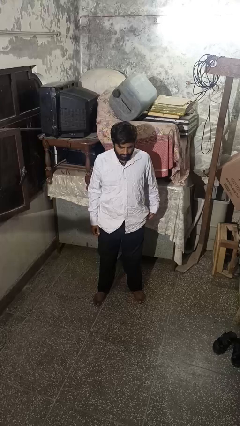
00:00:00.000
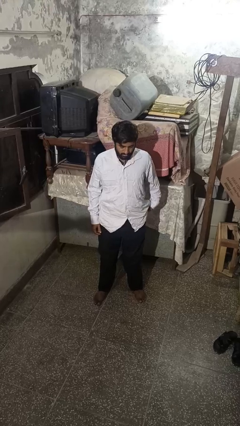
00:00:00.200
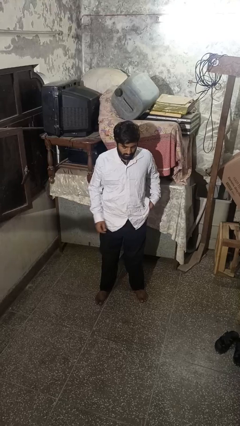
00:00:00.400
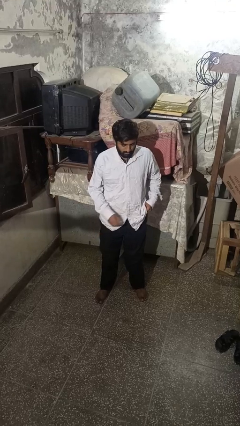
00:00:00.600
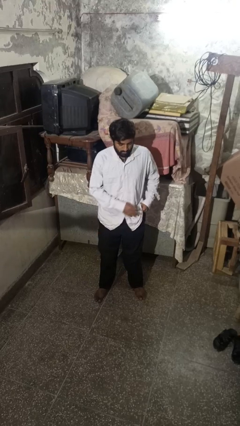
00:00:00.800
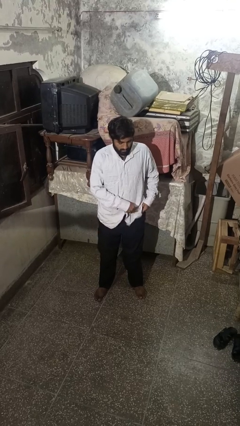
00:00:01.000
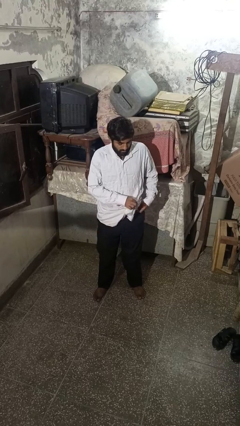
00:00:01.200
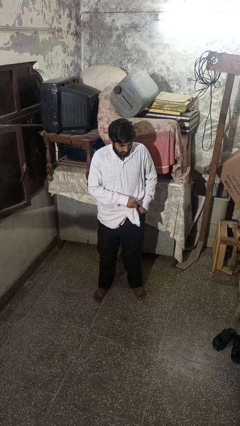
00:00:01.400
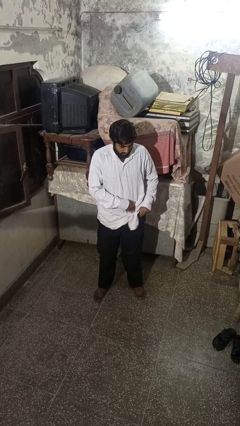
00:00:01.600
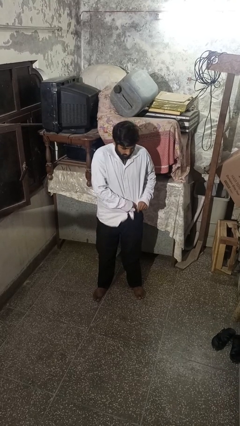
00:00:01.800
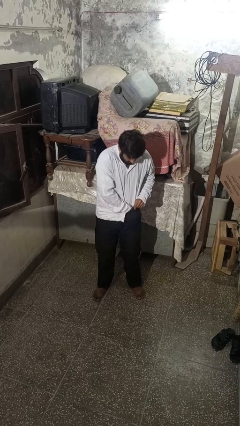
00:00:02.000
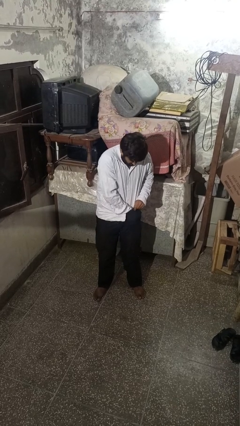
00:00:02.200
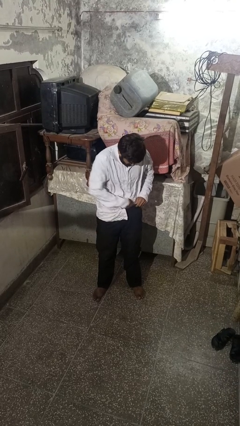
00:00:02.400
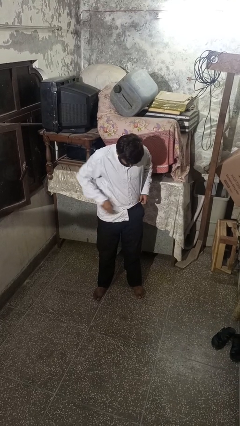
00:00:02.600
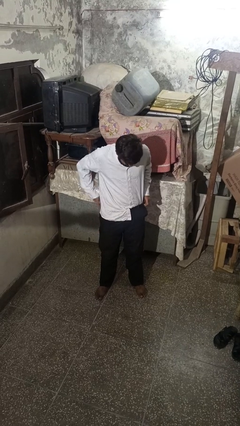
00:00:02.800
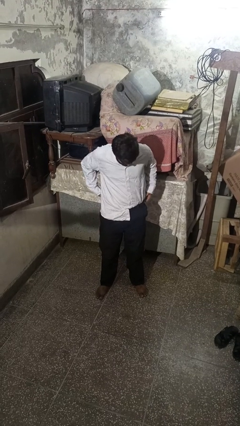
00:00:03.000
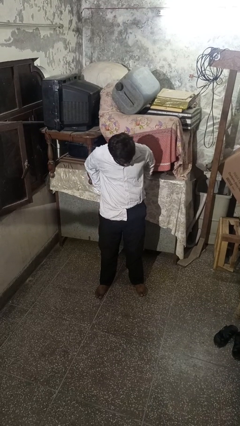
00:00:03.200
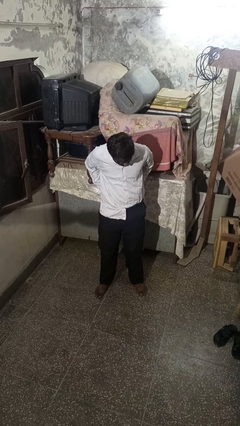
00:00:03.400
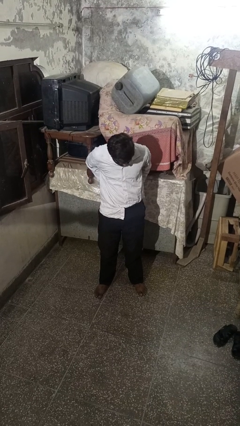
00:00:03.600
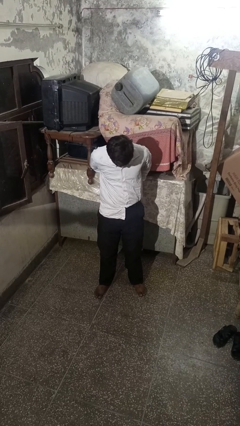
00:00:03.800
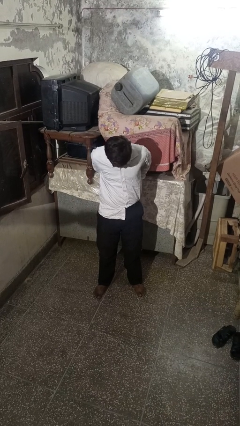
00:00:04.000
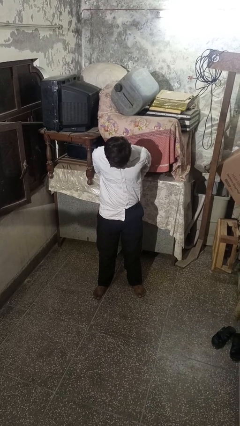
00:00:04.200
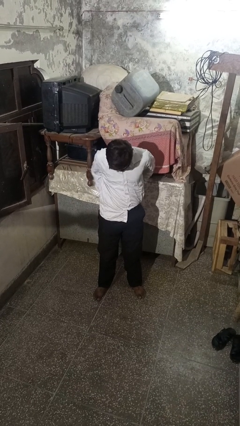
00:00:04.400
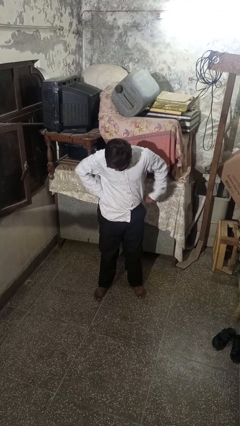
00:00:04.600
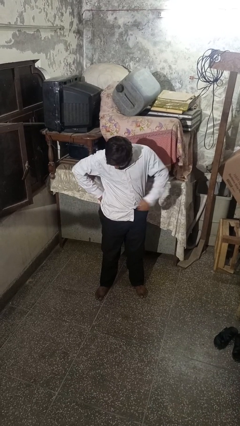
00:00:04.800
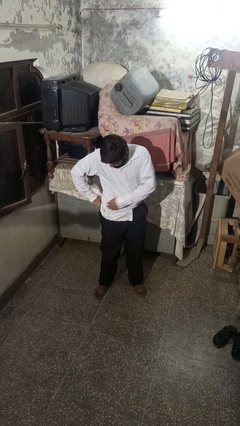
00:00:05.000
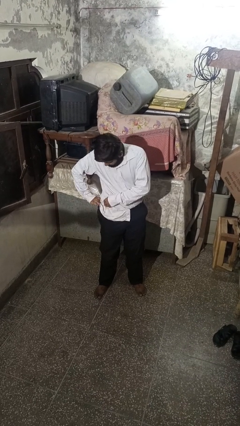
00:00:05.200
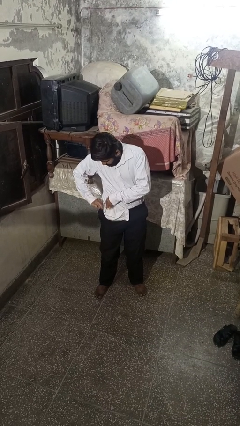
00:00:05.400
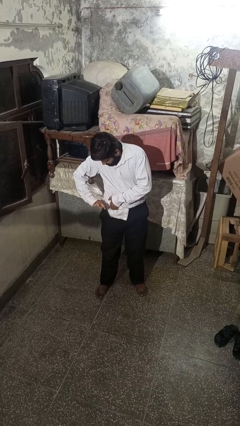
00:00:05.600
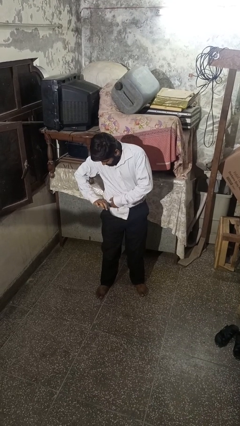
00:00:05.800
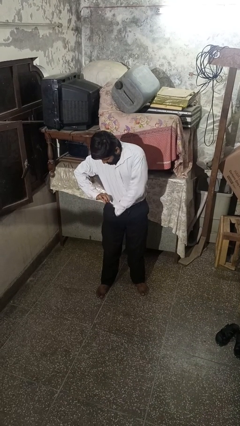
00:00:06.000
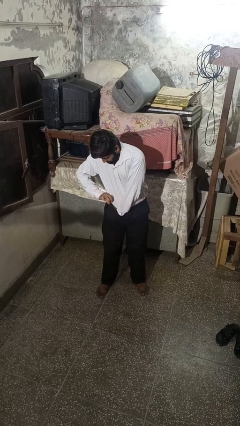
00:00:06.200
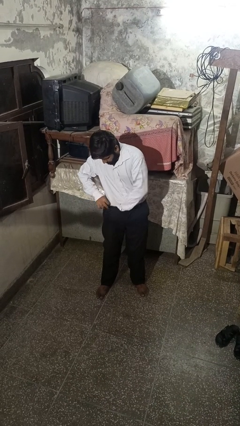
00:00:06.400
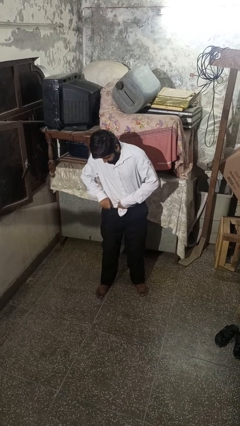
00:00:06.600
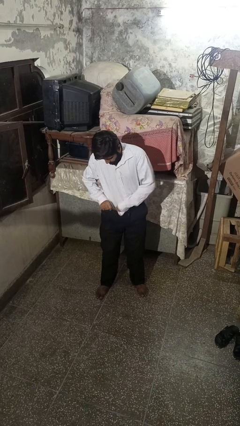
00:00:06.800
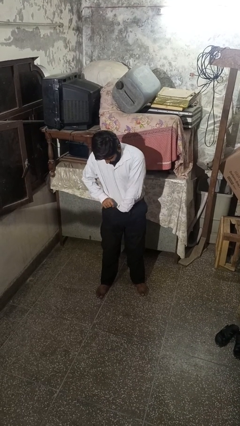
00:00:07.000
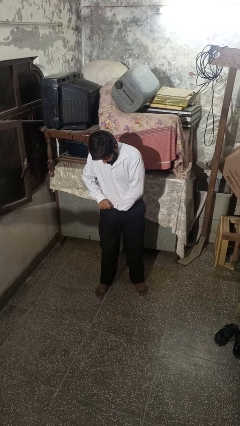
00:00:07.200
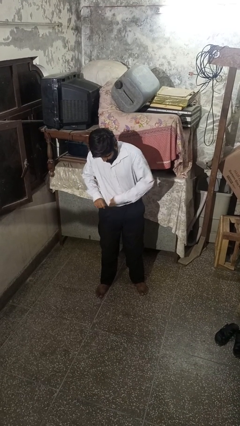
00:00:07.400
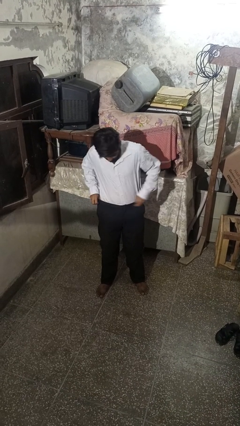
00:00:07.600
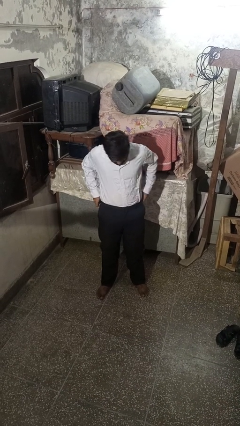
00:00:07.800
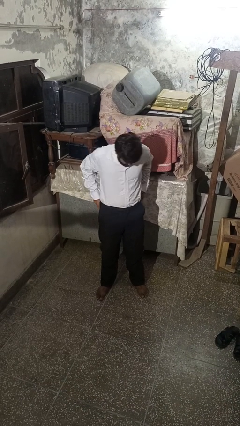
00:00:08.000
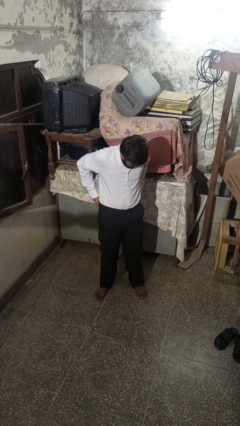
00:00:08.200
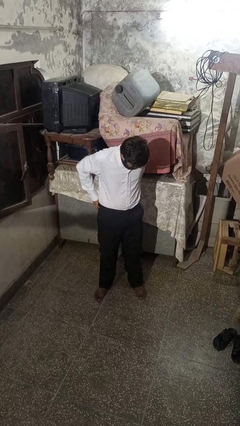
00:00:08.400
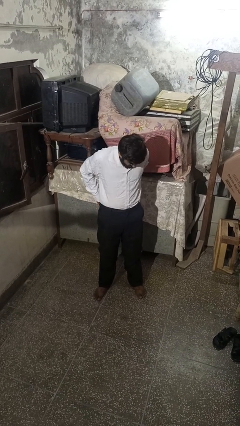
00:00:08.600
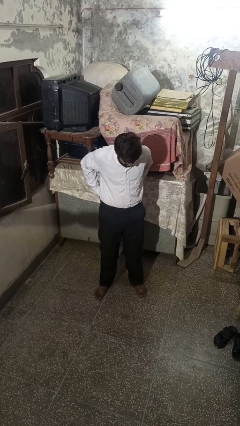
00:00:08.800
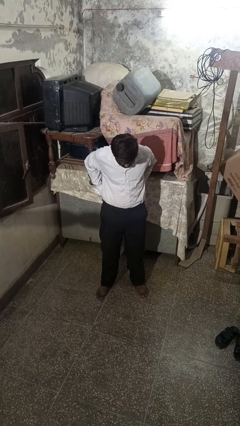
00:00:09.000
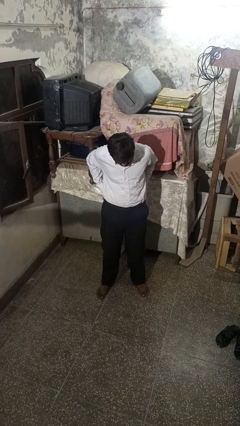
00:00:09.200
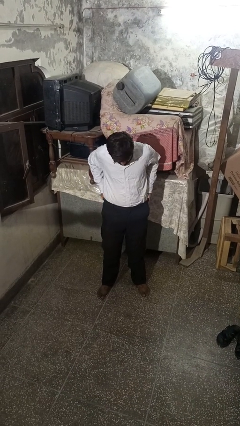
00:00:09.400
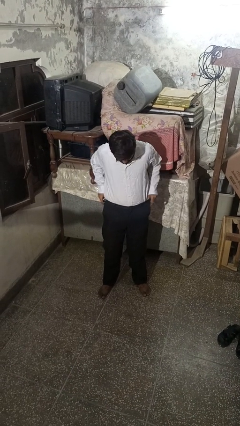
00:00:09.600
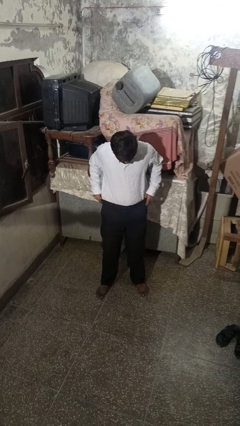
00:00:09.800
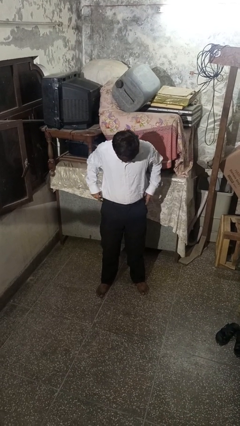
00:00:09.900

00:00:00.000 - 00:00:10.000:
person tucks in shirt

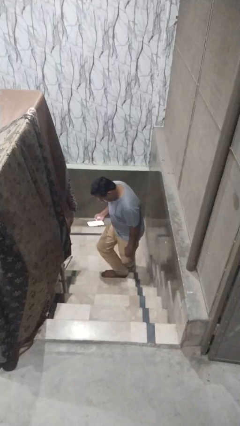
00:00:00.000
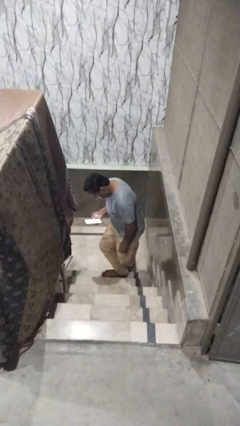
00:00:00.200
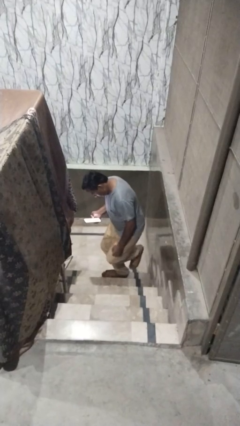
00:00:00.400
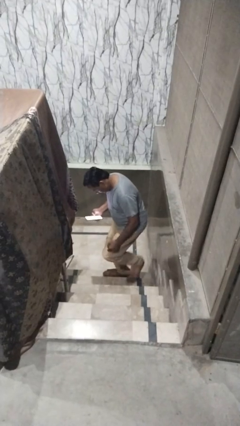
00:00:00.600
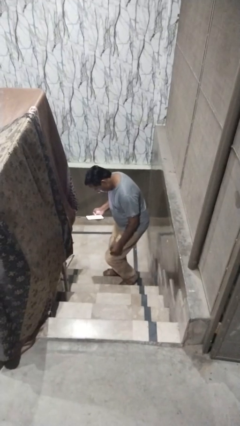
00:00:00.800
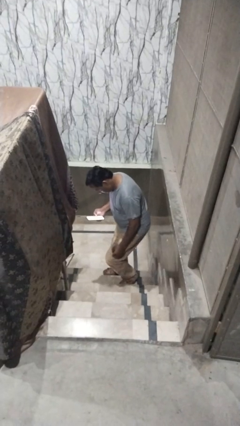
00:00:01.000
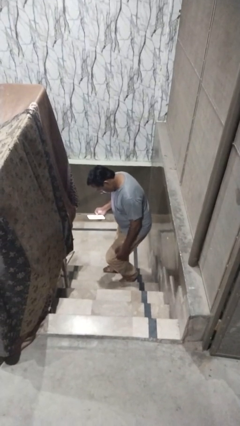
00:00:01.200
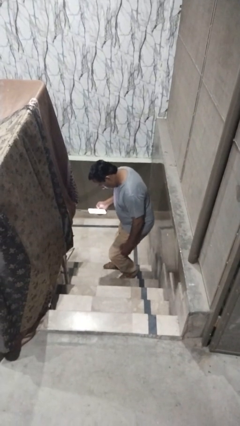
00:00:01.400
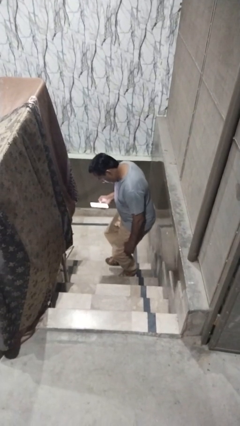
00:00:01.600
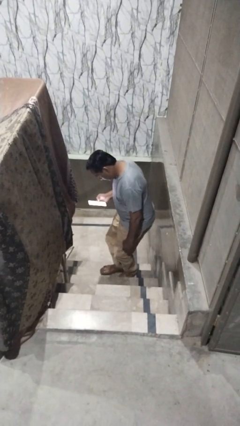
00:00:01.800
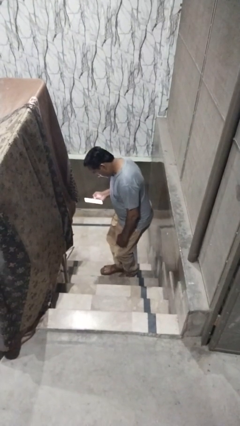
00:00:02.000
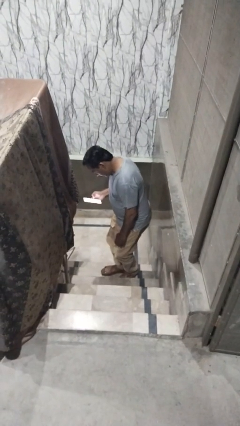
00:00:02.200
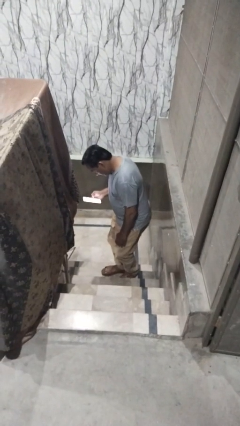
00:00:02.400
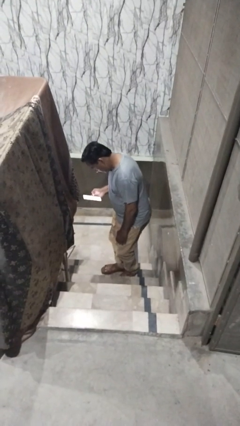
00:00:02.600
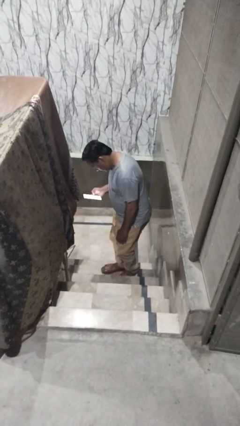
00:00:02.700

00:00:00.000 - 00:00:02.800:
person climbs up stairs

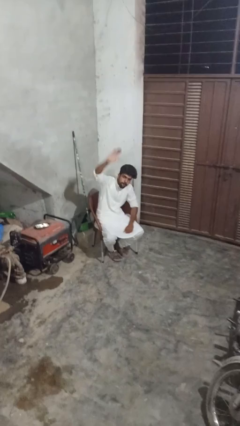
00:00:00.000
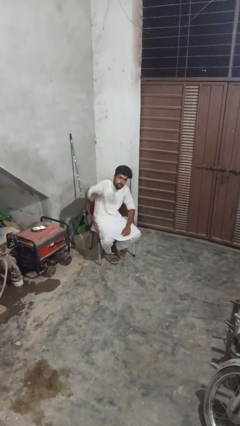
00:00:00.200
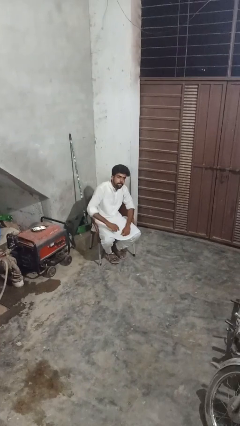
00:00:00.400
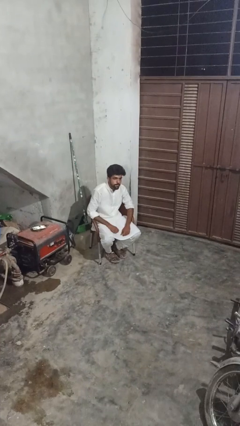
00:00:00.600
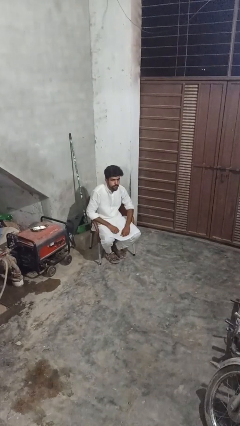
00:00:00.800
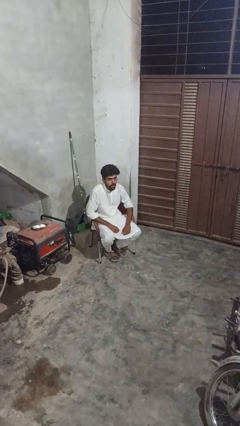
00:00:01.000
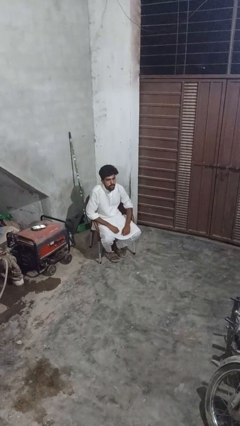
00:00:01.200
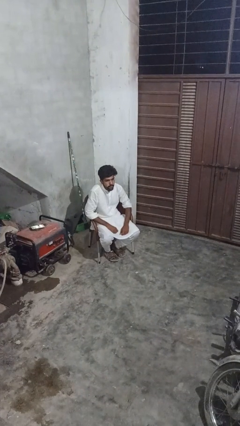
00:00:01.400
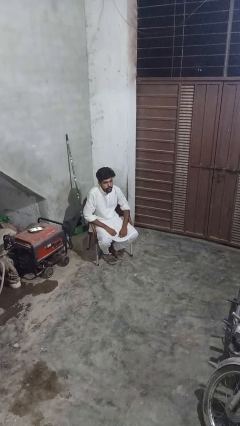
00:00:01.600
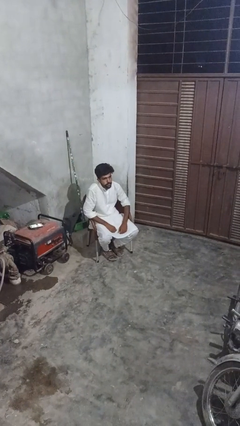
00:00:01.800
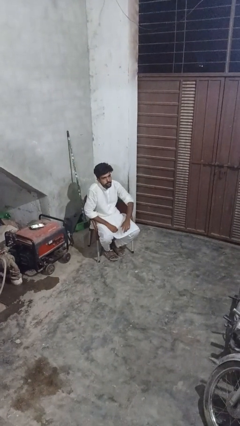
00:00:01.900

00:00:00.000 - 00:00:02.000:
person gestures lower hand

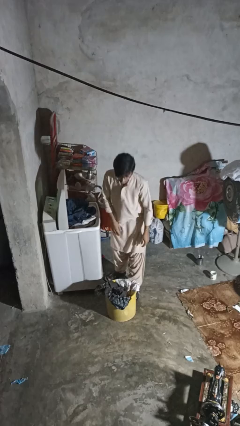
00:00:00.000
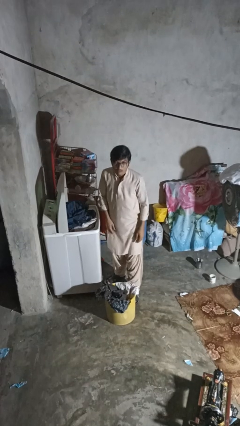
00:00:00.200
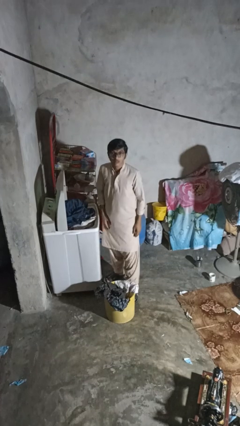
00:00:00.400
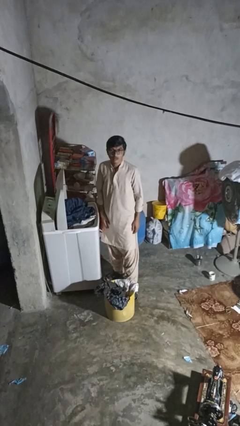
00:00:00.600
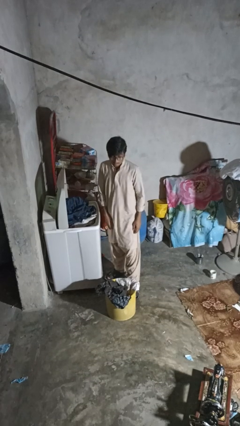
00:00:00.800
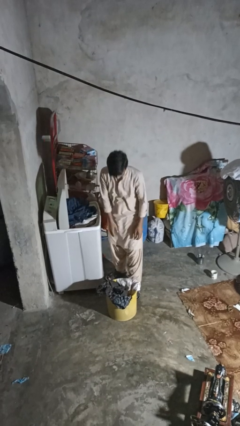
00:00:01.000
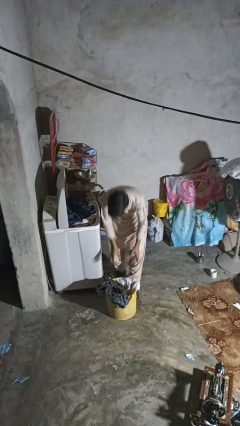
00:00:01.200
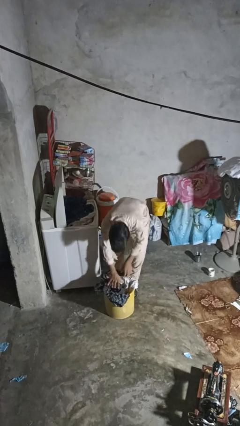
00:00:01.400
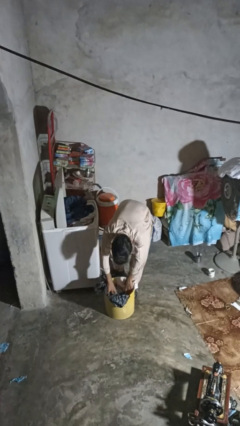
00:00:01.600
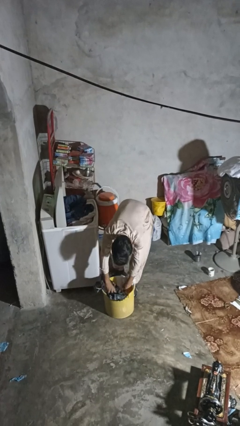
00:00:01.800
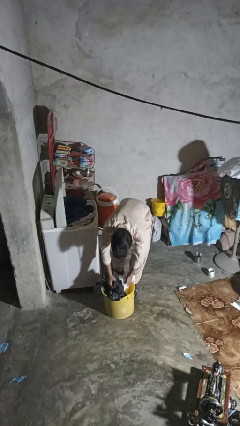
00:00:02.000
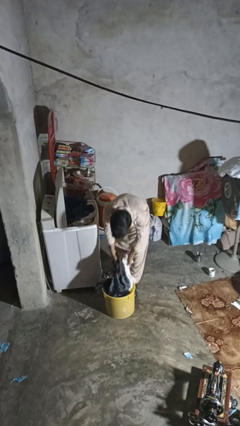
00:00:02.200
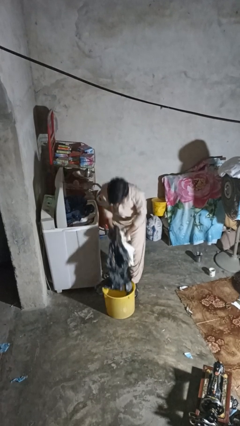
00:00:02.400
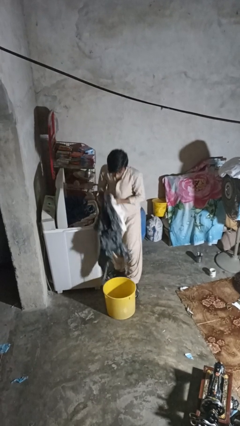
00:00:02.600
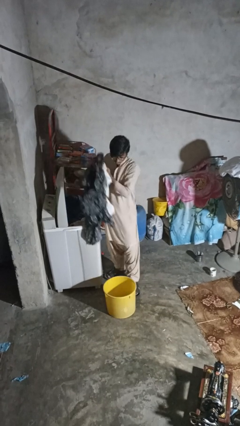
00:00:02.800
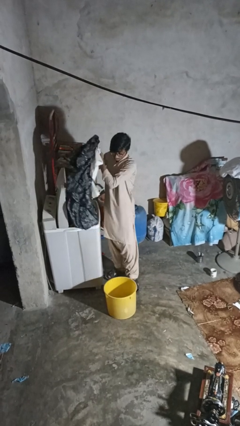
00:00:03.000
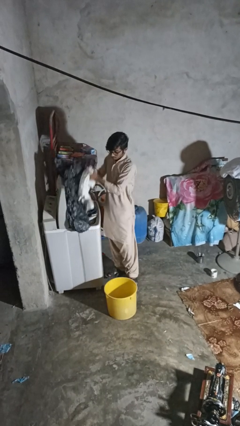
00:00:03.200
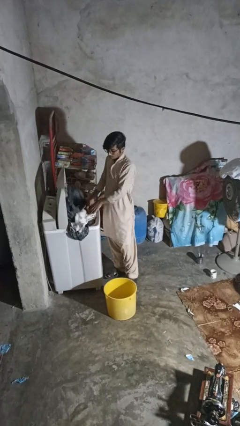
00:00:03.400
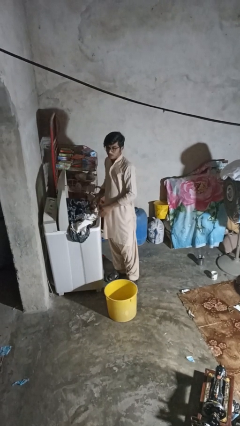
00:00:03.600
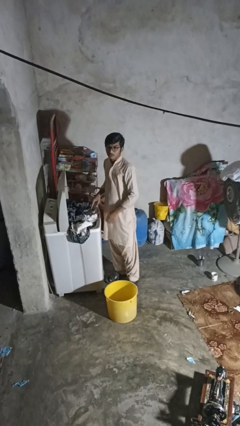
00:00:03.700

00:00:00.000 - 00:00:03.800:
person loads clotheswasher
